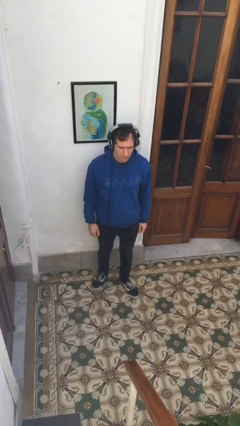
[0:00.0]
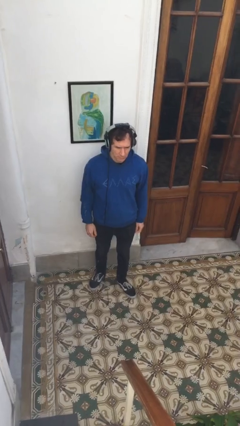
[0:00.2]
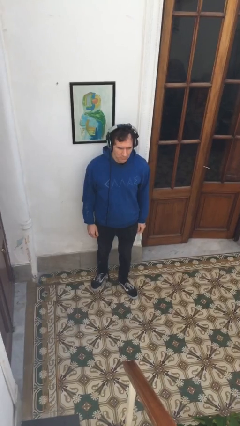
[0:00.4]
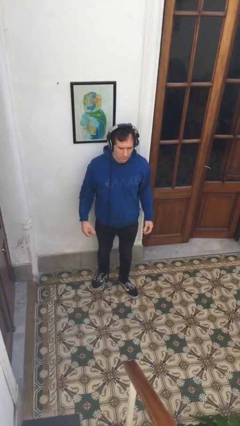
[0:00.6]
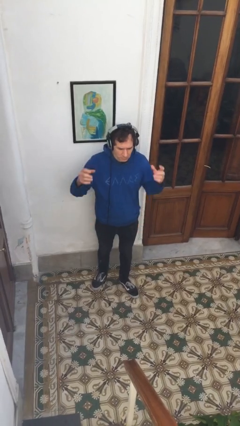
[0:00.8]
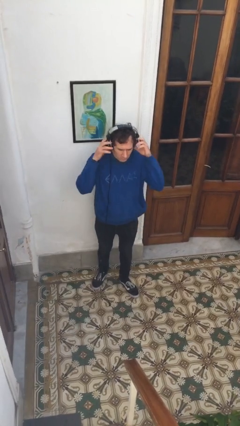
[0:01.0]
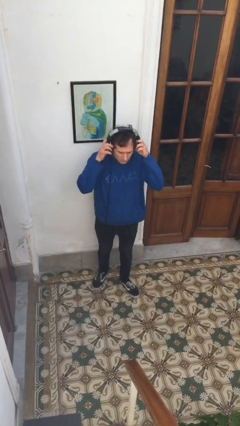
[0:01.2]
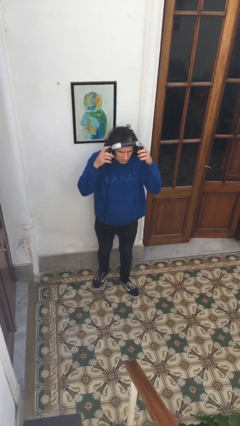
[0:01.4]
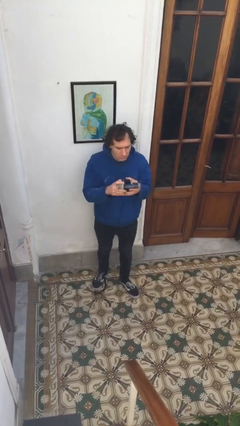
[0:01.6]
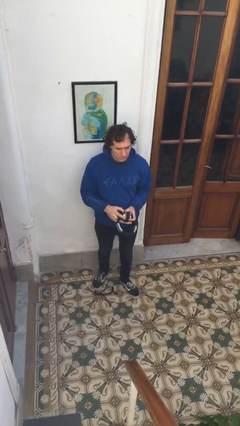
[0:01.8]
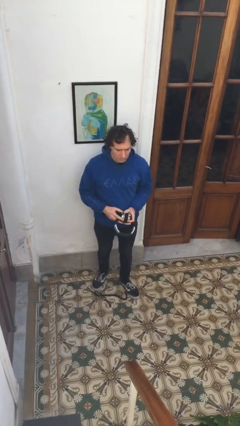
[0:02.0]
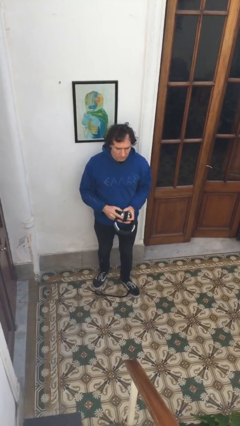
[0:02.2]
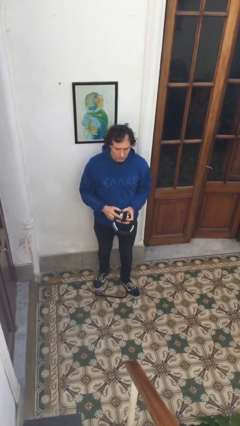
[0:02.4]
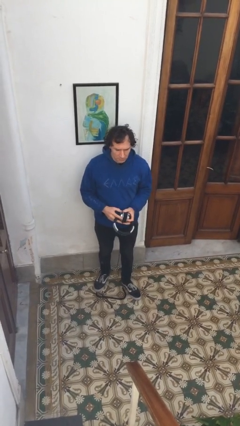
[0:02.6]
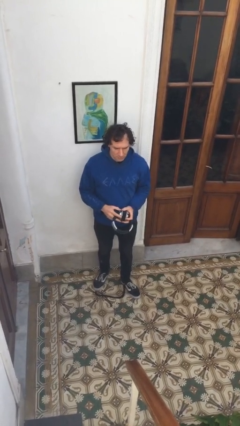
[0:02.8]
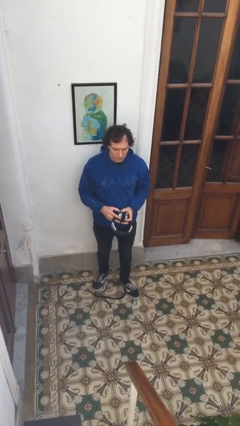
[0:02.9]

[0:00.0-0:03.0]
person takes off headphones

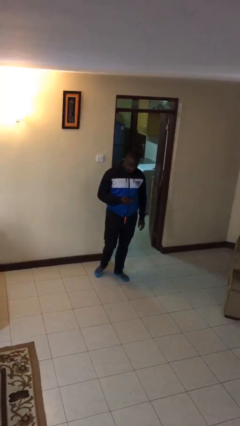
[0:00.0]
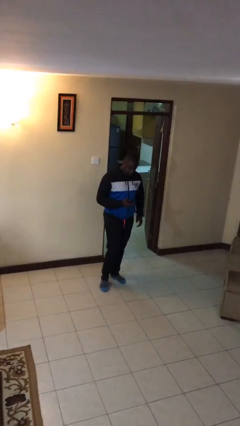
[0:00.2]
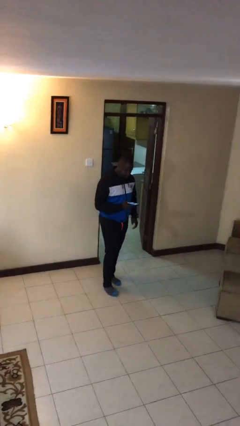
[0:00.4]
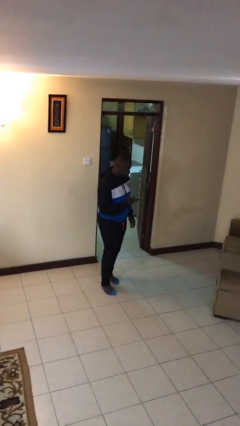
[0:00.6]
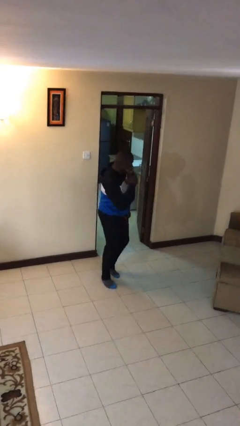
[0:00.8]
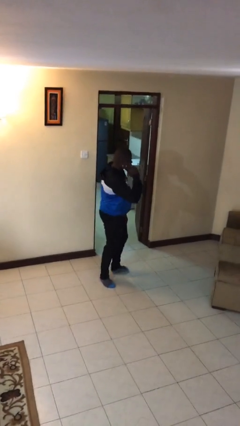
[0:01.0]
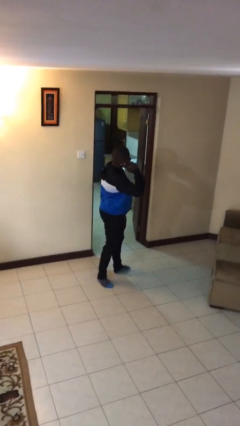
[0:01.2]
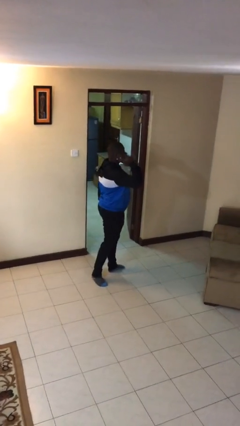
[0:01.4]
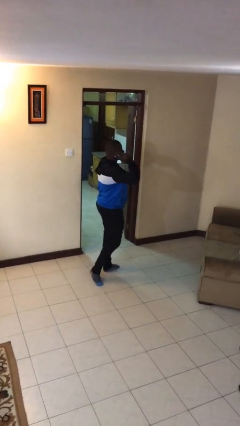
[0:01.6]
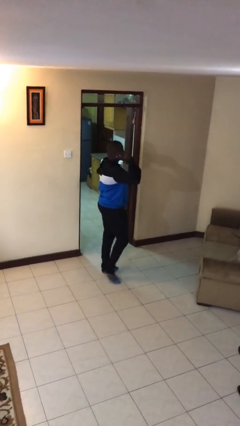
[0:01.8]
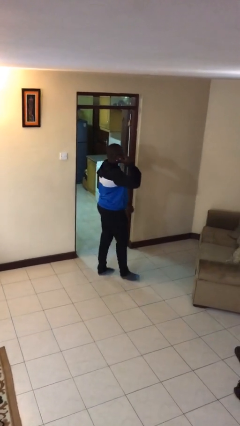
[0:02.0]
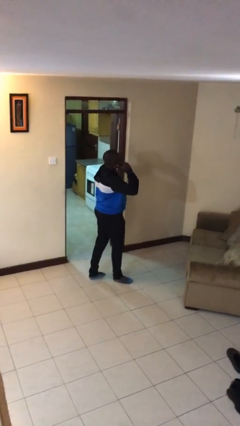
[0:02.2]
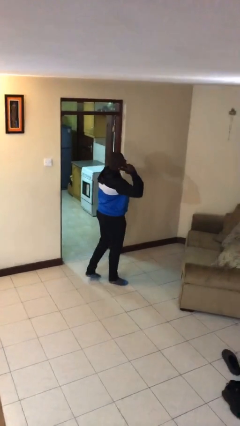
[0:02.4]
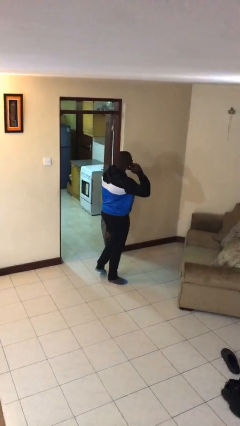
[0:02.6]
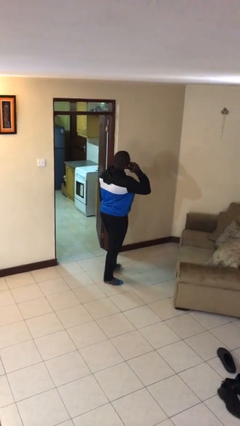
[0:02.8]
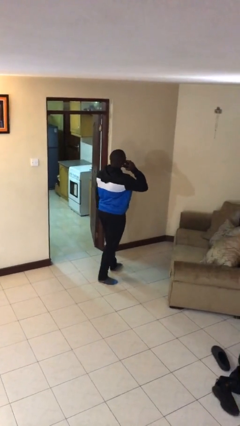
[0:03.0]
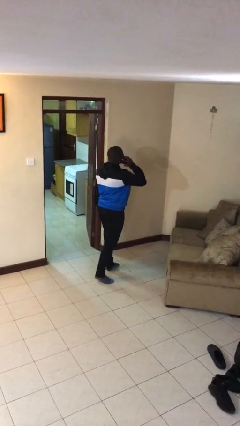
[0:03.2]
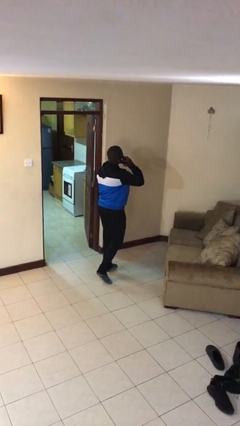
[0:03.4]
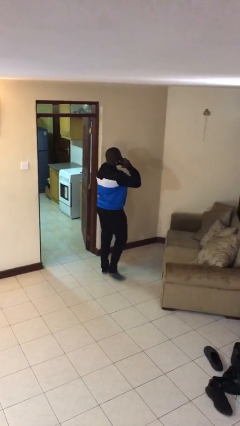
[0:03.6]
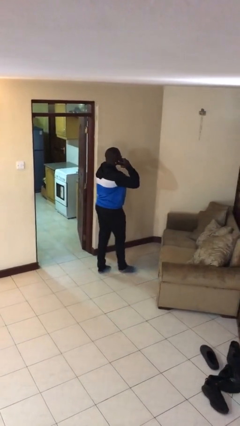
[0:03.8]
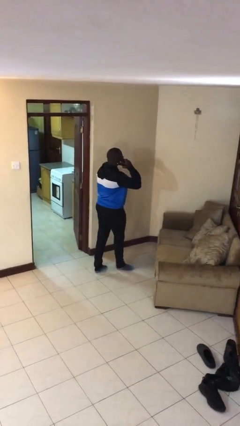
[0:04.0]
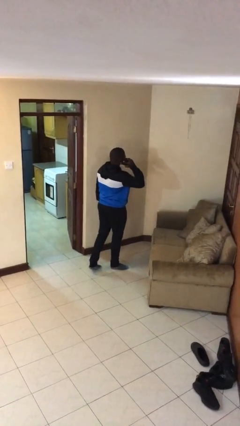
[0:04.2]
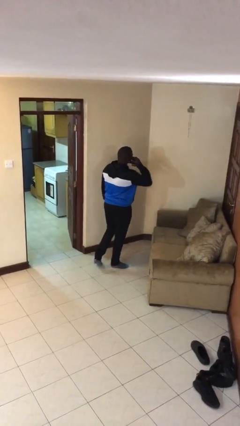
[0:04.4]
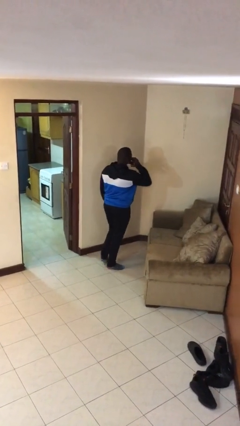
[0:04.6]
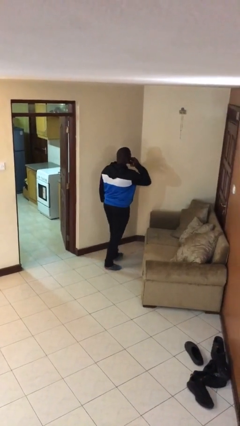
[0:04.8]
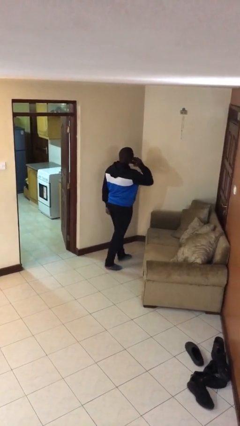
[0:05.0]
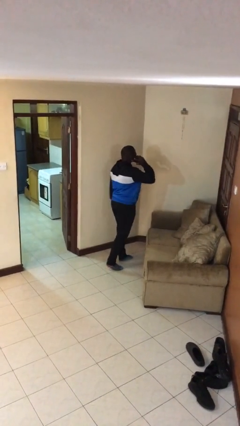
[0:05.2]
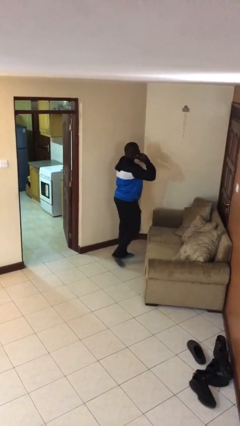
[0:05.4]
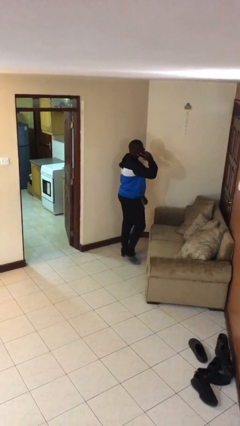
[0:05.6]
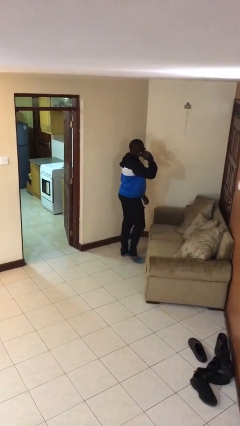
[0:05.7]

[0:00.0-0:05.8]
person talks on phone

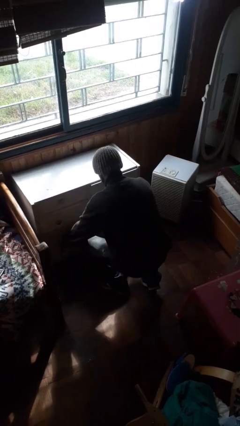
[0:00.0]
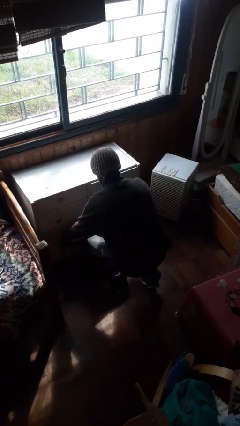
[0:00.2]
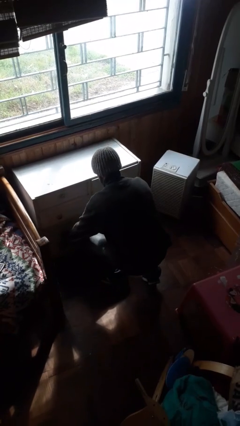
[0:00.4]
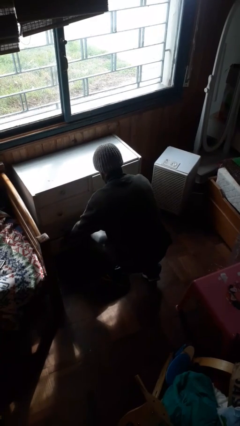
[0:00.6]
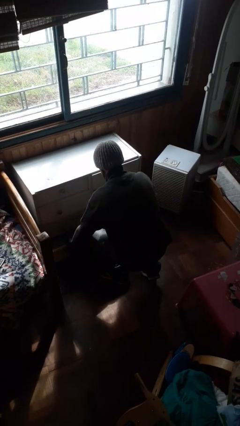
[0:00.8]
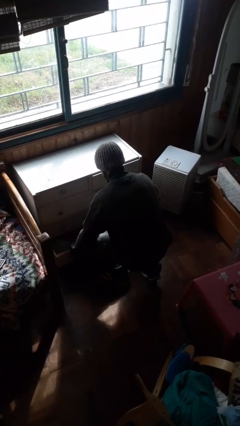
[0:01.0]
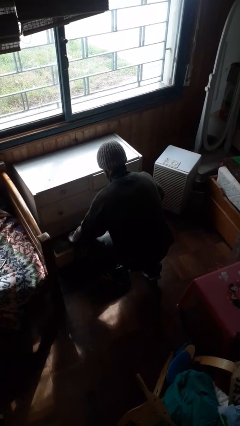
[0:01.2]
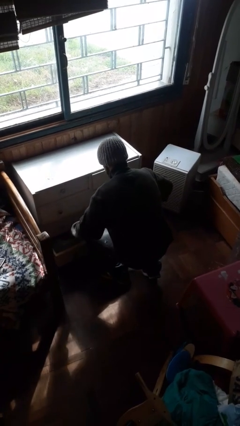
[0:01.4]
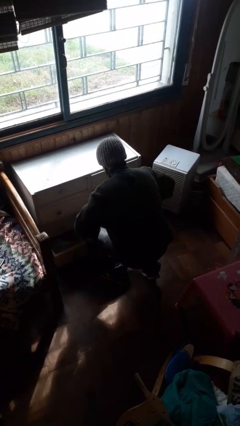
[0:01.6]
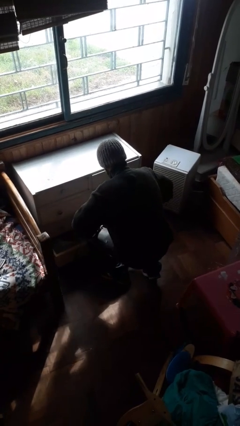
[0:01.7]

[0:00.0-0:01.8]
person opens dresser drawer

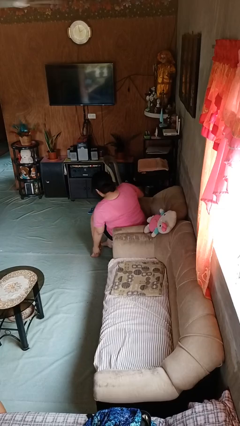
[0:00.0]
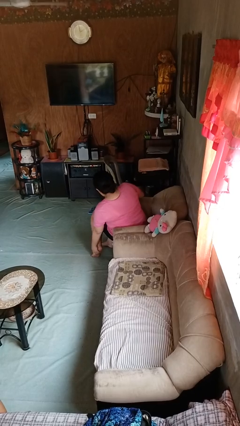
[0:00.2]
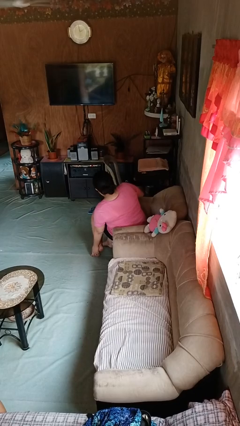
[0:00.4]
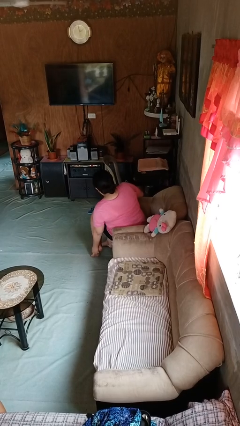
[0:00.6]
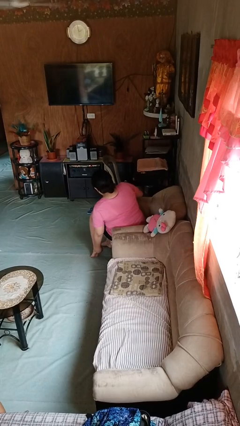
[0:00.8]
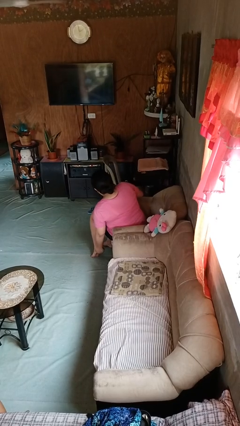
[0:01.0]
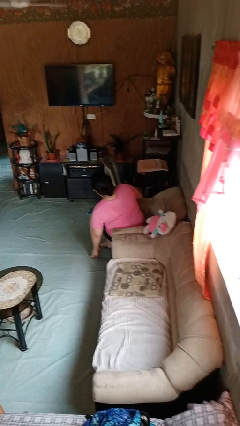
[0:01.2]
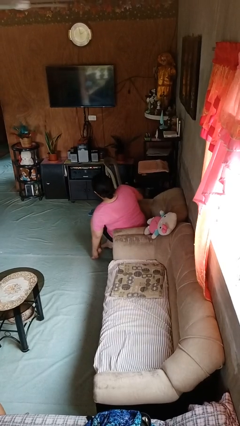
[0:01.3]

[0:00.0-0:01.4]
person rubs foot

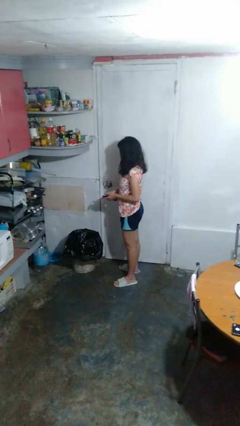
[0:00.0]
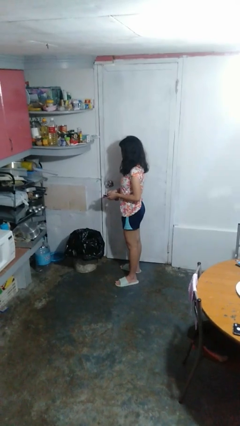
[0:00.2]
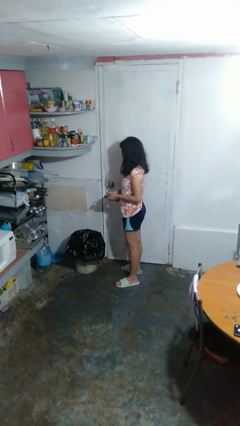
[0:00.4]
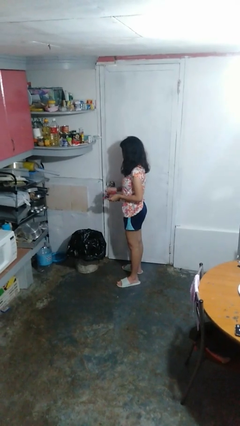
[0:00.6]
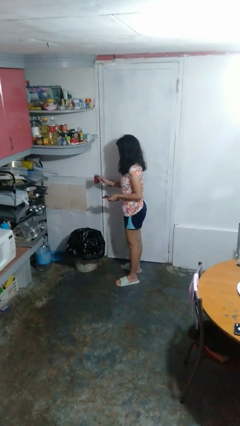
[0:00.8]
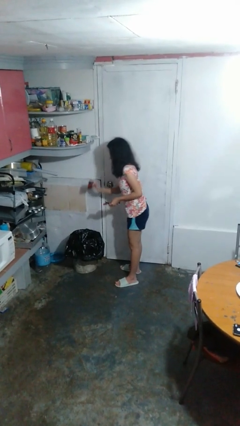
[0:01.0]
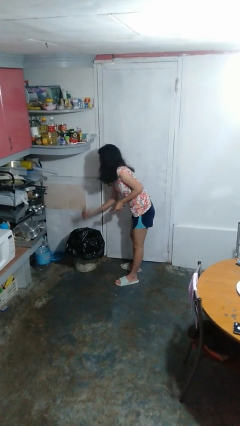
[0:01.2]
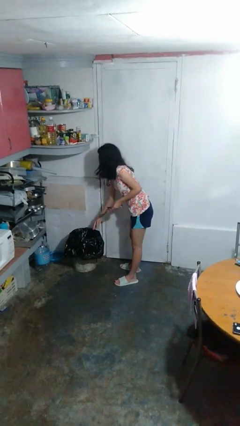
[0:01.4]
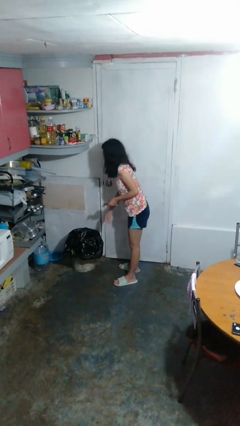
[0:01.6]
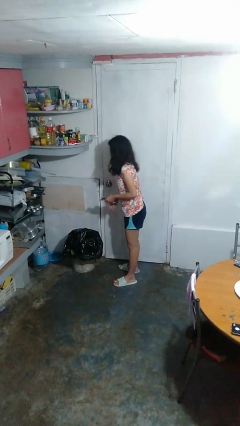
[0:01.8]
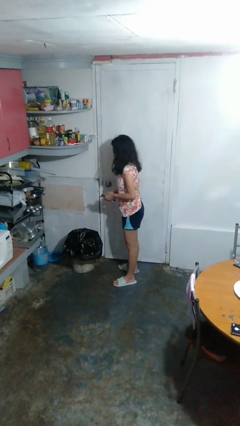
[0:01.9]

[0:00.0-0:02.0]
person discards trash

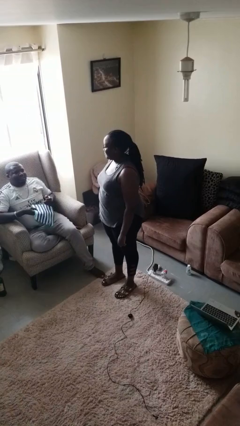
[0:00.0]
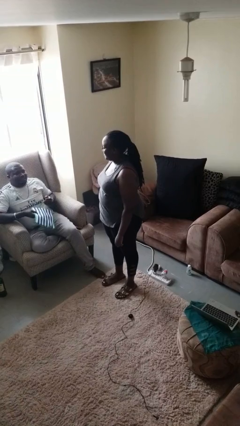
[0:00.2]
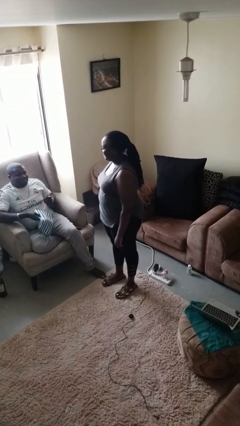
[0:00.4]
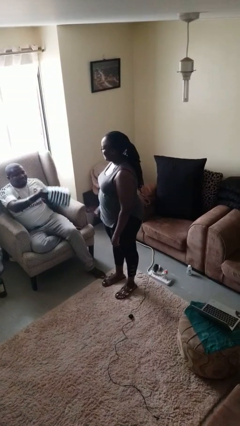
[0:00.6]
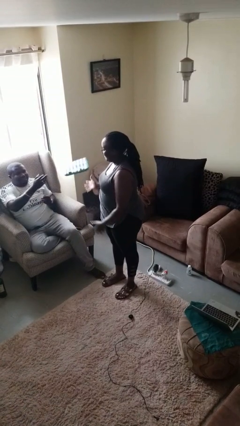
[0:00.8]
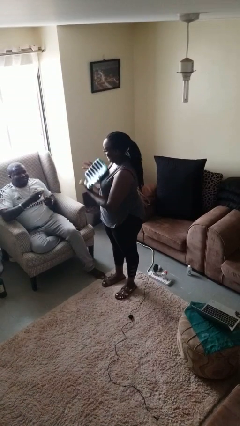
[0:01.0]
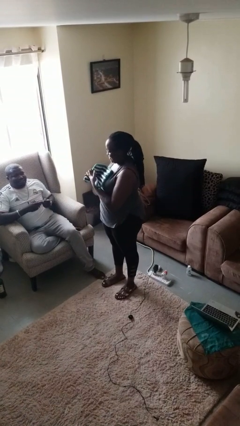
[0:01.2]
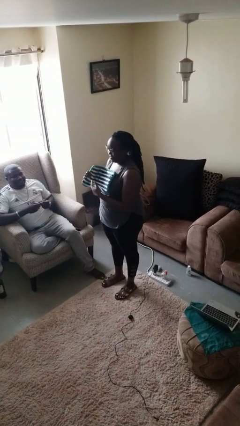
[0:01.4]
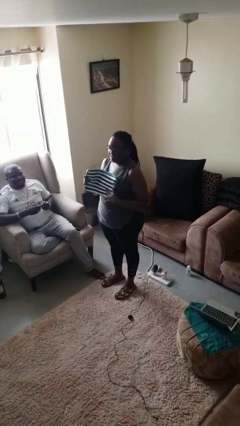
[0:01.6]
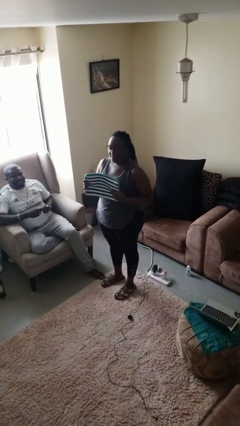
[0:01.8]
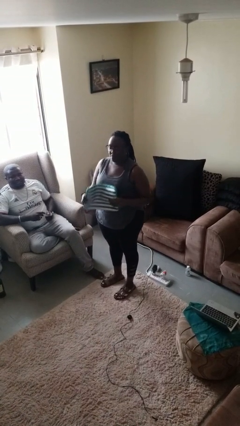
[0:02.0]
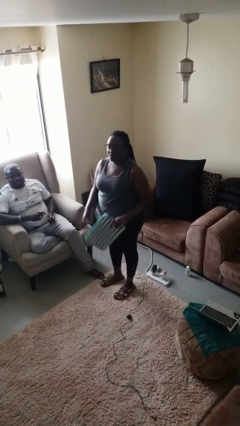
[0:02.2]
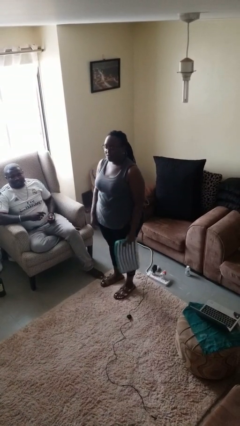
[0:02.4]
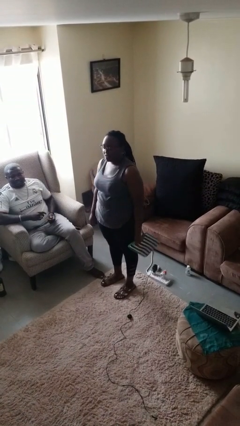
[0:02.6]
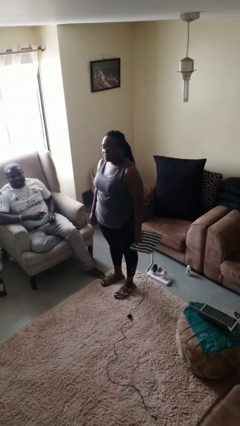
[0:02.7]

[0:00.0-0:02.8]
person catches object from person

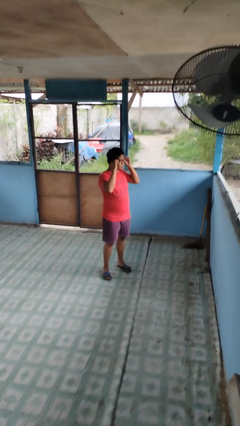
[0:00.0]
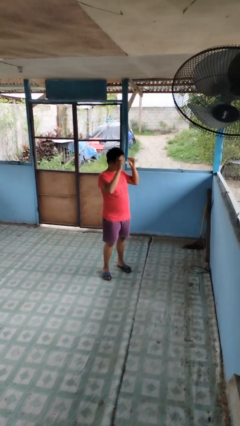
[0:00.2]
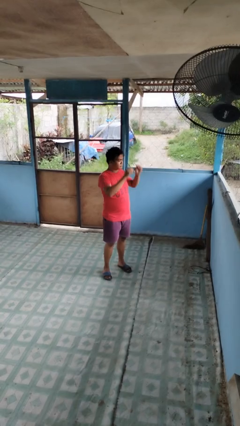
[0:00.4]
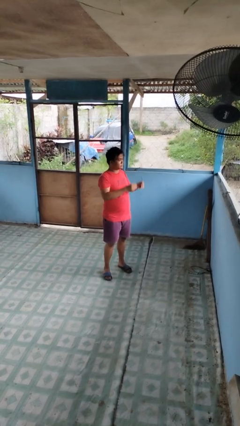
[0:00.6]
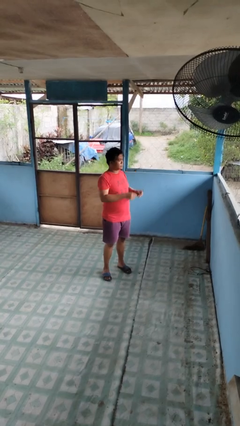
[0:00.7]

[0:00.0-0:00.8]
person takes off glasses
